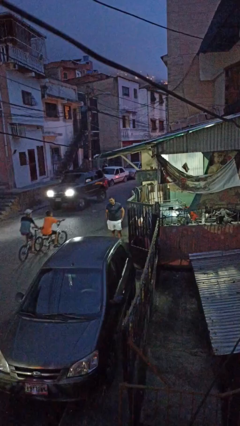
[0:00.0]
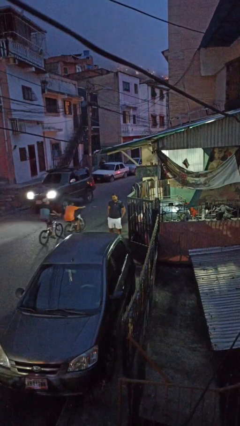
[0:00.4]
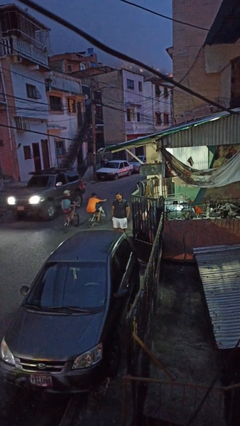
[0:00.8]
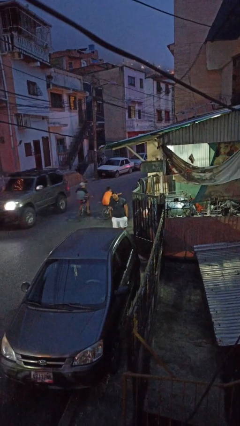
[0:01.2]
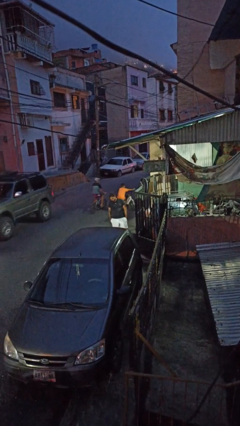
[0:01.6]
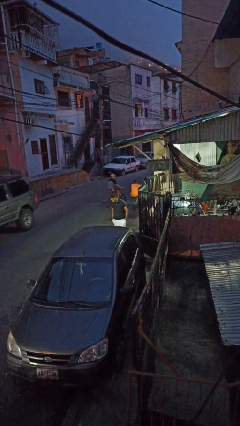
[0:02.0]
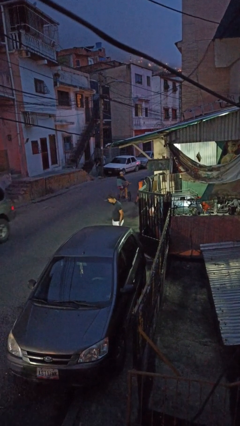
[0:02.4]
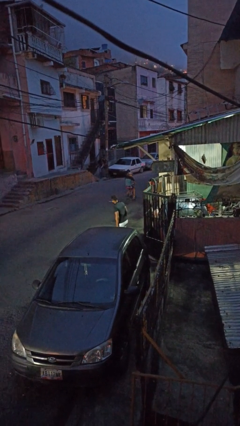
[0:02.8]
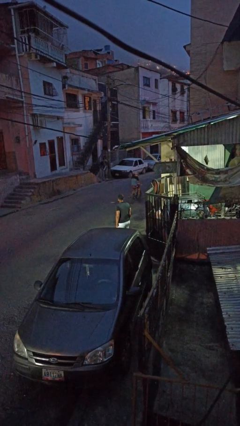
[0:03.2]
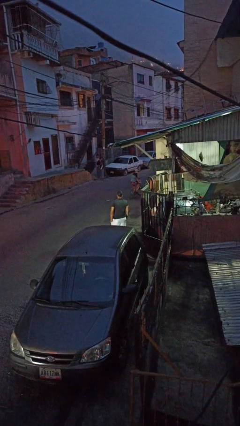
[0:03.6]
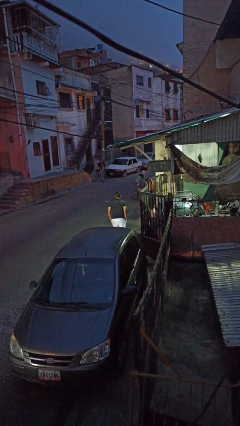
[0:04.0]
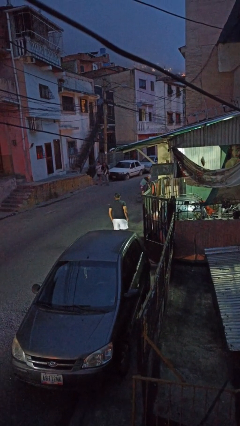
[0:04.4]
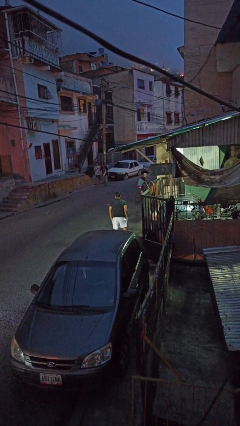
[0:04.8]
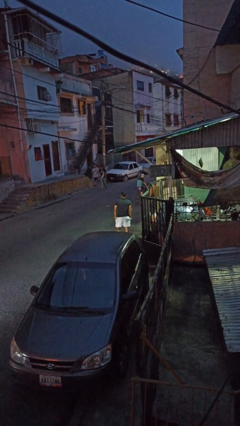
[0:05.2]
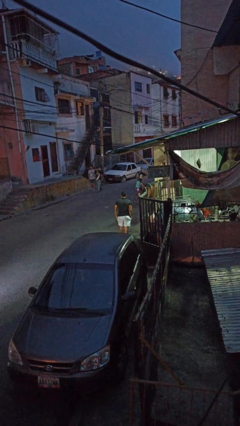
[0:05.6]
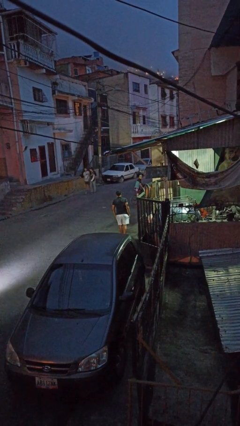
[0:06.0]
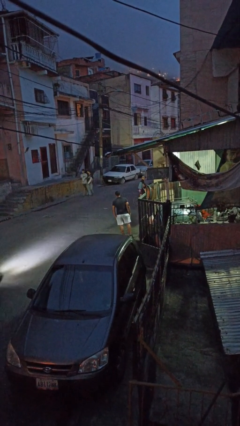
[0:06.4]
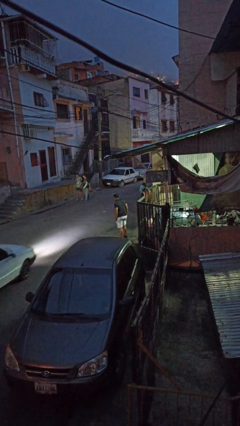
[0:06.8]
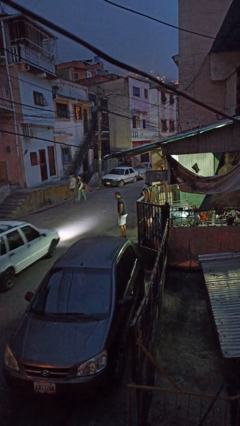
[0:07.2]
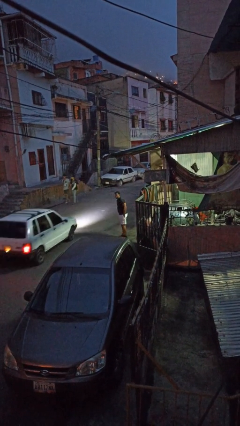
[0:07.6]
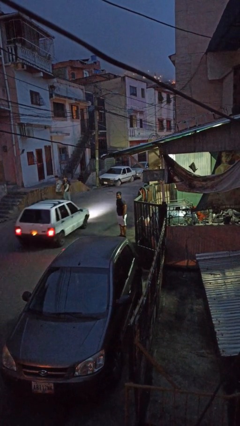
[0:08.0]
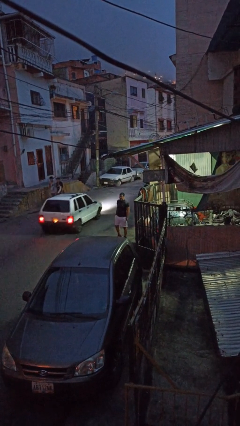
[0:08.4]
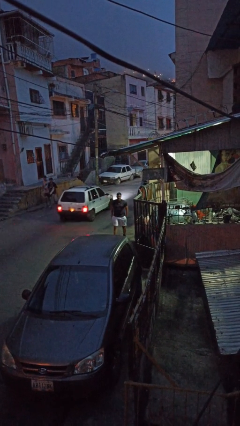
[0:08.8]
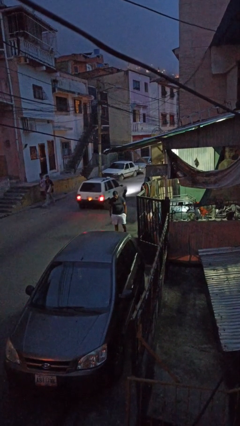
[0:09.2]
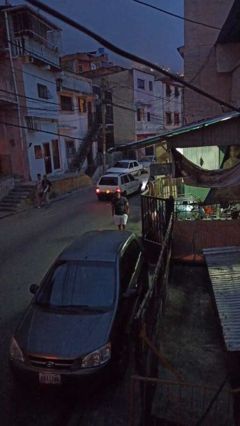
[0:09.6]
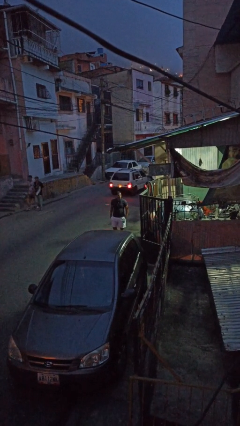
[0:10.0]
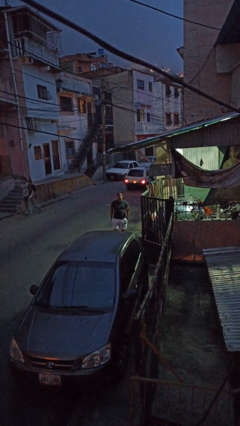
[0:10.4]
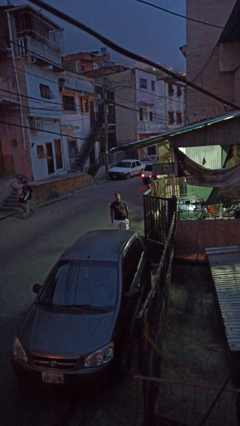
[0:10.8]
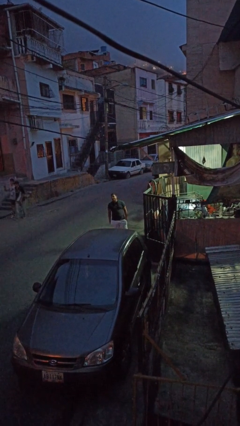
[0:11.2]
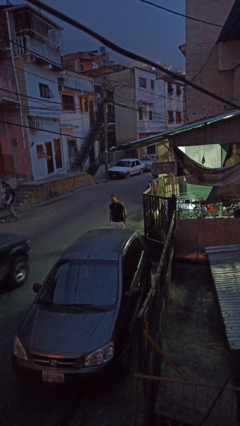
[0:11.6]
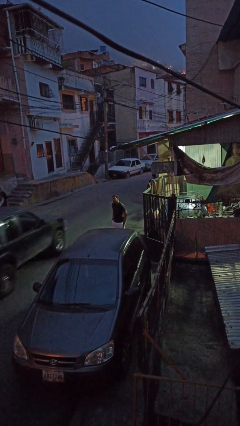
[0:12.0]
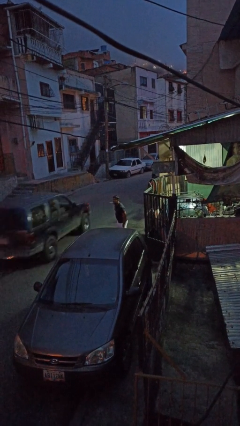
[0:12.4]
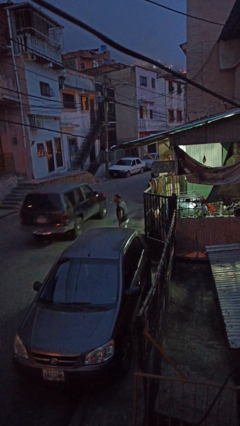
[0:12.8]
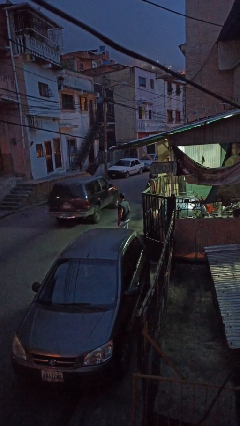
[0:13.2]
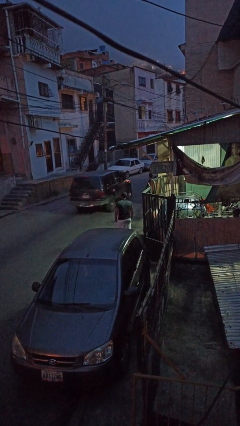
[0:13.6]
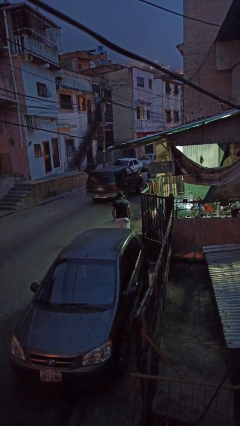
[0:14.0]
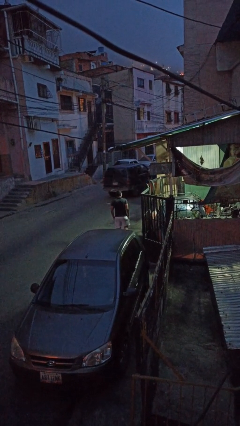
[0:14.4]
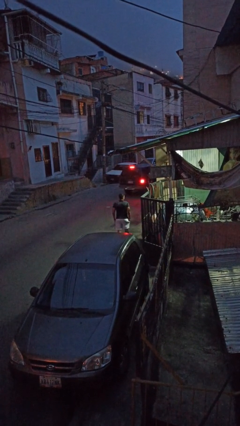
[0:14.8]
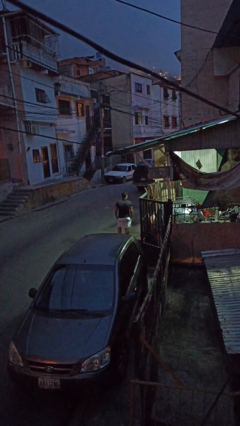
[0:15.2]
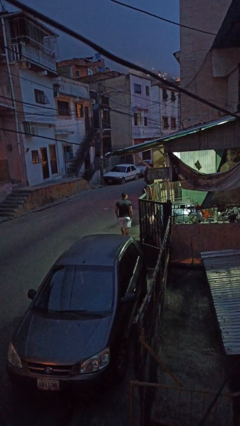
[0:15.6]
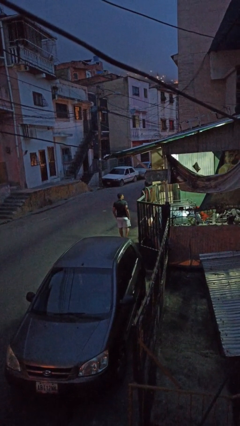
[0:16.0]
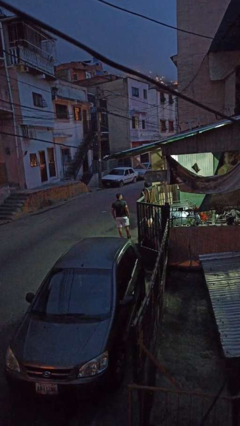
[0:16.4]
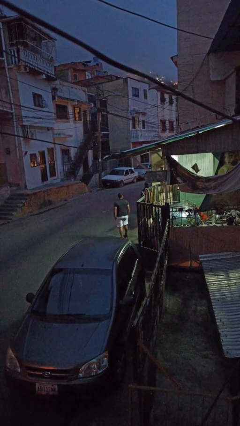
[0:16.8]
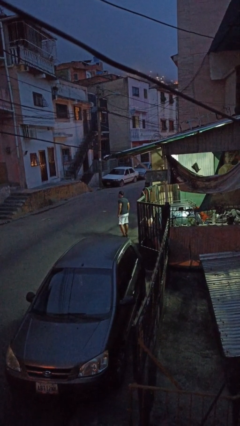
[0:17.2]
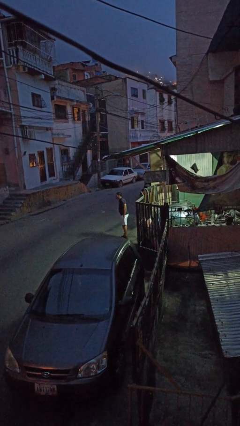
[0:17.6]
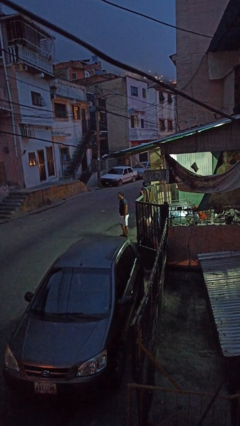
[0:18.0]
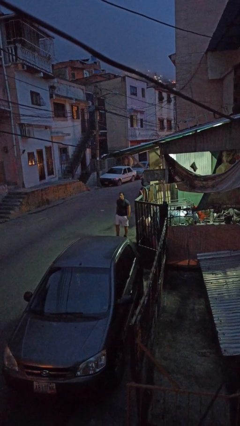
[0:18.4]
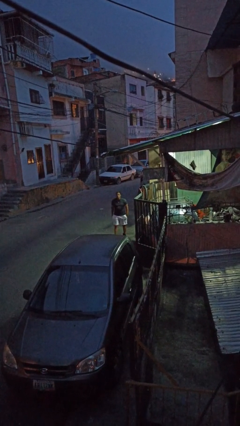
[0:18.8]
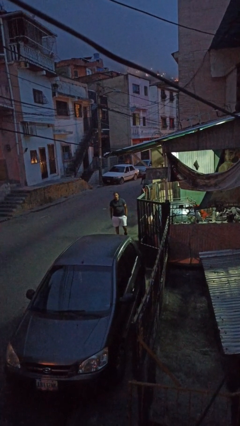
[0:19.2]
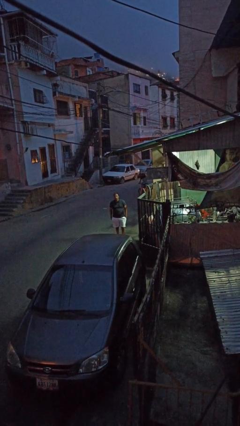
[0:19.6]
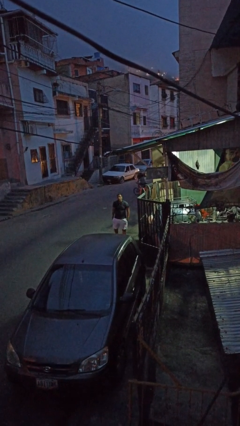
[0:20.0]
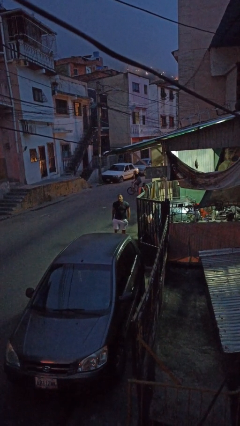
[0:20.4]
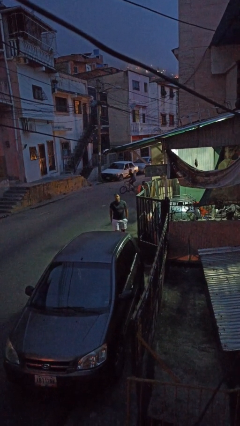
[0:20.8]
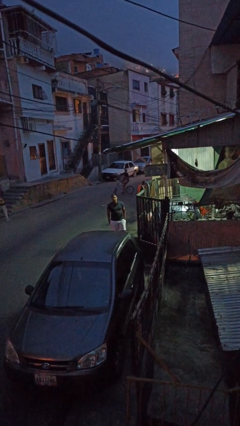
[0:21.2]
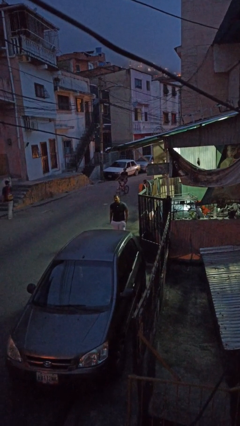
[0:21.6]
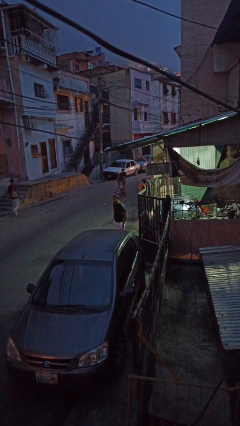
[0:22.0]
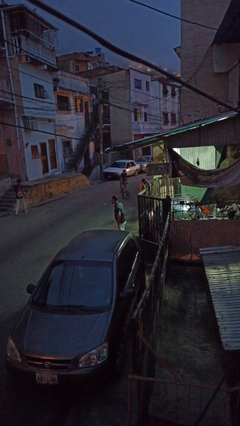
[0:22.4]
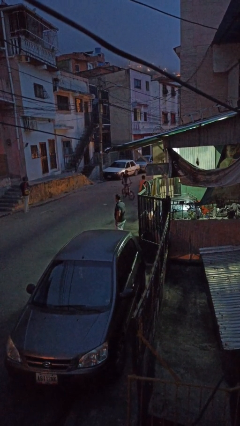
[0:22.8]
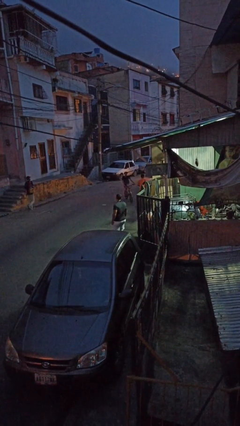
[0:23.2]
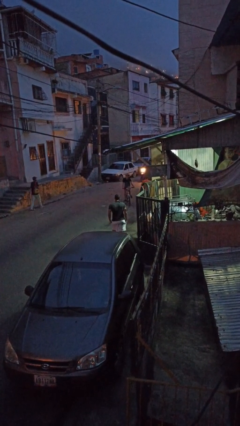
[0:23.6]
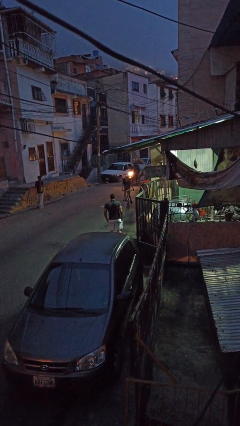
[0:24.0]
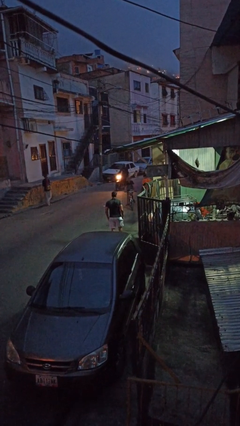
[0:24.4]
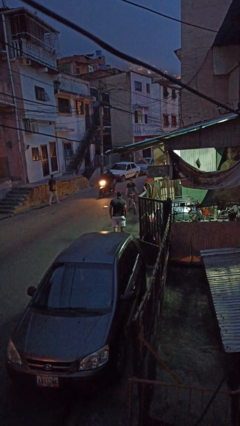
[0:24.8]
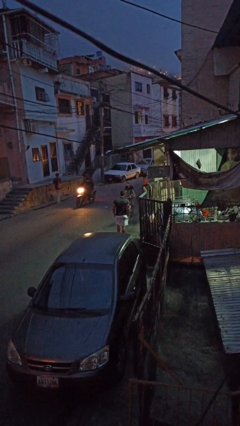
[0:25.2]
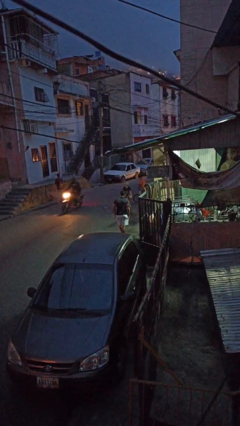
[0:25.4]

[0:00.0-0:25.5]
person walks

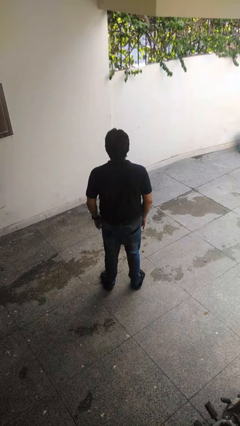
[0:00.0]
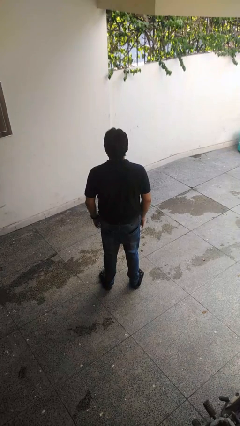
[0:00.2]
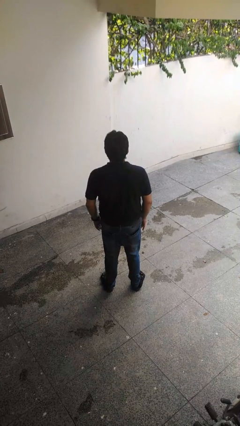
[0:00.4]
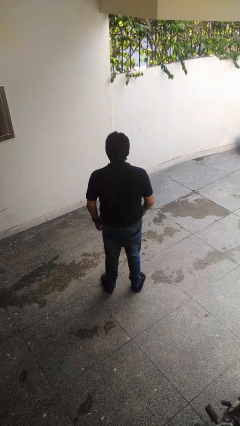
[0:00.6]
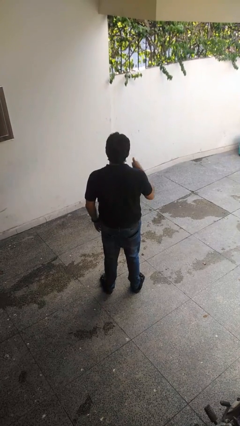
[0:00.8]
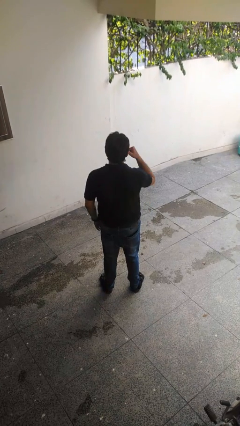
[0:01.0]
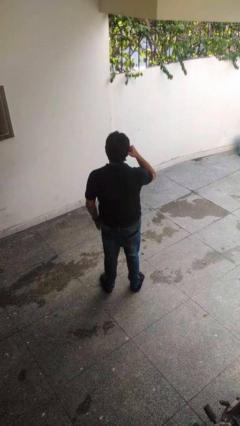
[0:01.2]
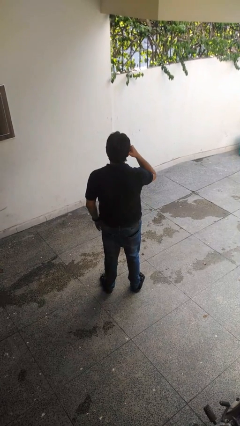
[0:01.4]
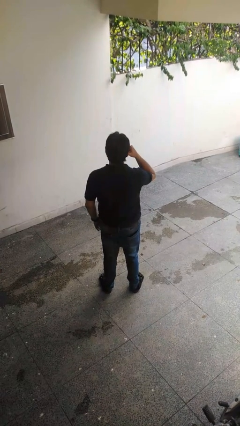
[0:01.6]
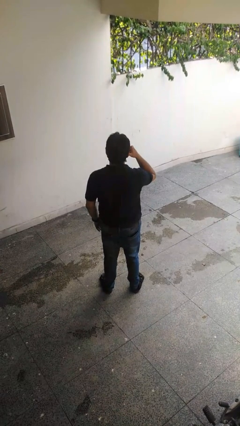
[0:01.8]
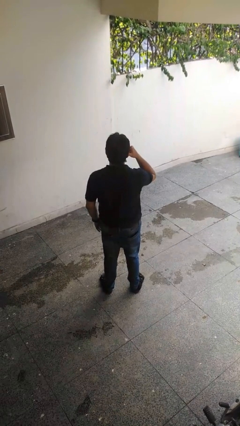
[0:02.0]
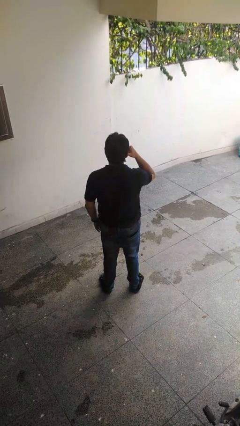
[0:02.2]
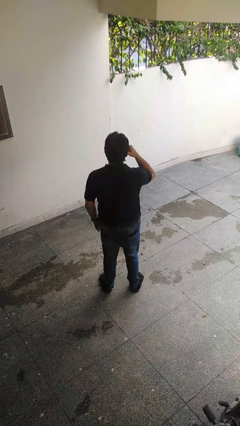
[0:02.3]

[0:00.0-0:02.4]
person gestures call me

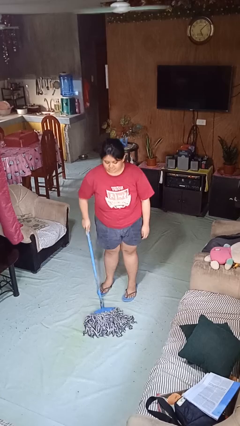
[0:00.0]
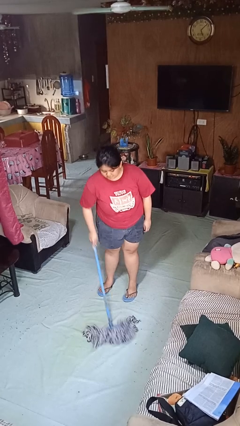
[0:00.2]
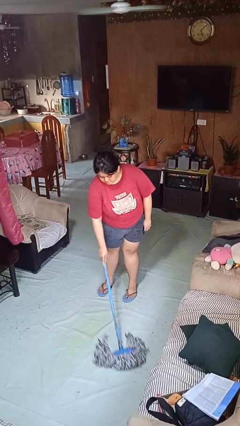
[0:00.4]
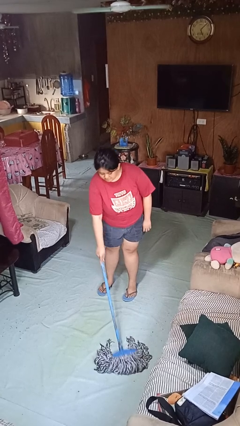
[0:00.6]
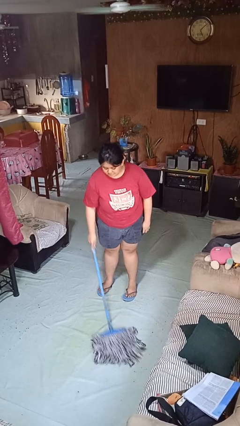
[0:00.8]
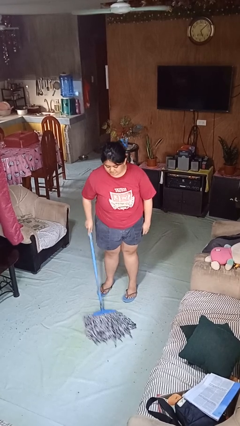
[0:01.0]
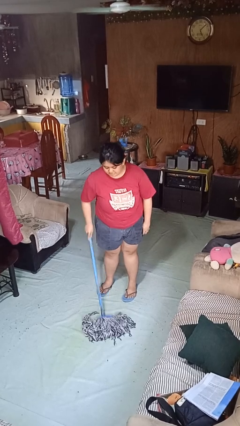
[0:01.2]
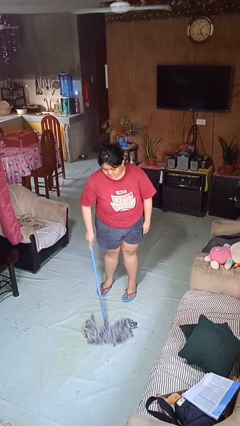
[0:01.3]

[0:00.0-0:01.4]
person mops

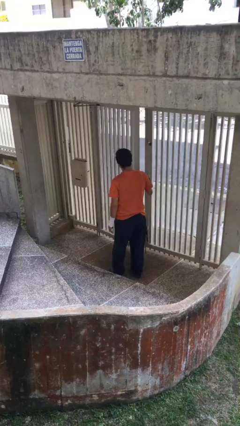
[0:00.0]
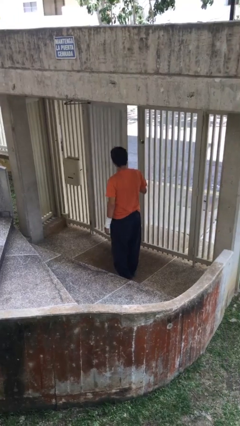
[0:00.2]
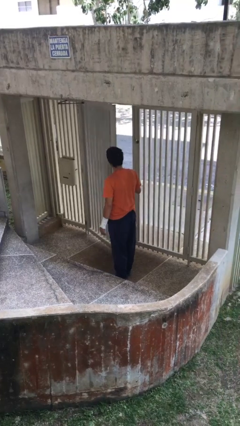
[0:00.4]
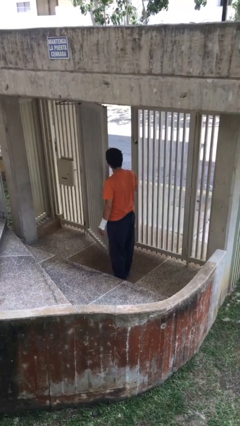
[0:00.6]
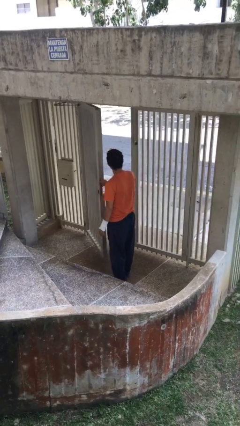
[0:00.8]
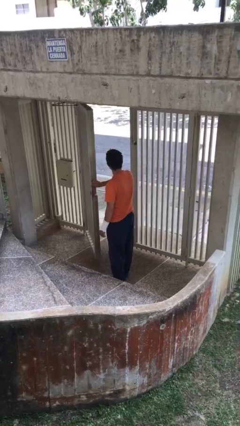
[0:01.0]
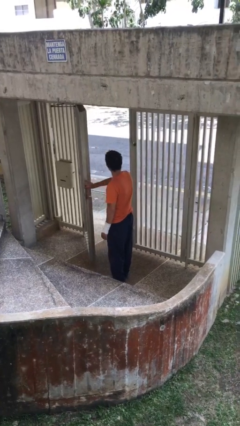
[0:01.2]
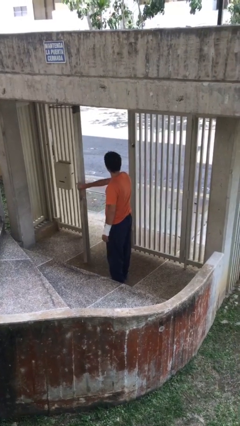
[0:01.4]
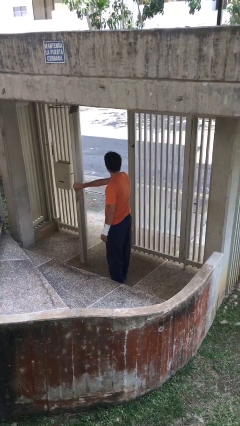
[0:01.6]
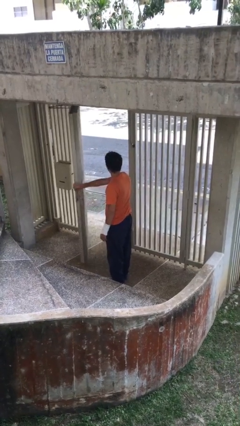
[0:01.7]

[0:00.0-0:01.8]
person opens facility door
